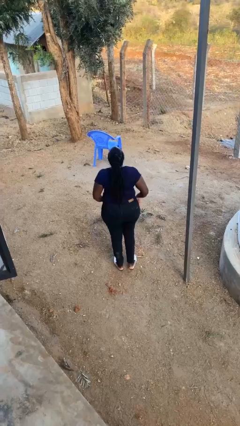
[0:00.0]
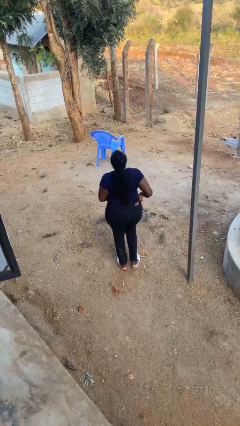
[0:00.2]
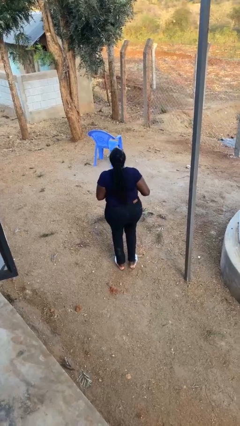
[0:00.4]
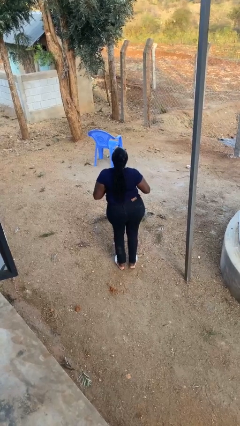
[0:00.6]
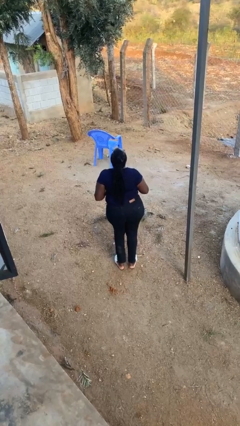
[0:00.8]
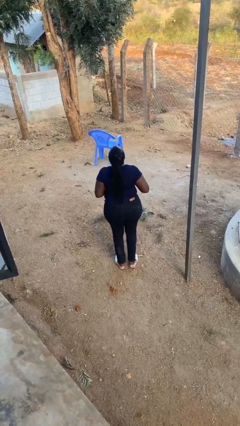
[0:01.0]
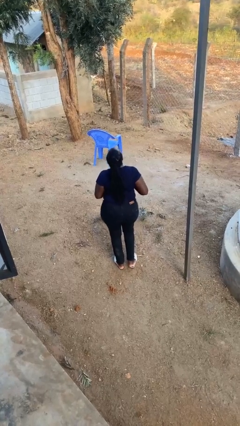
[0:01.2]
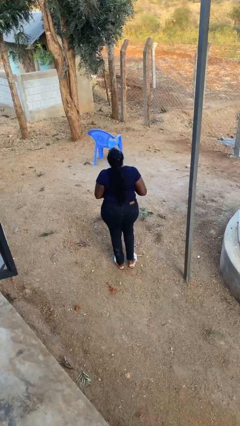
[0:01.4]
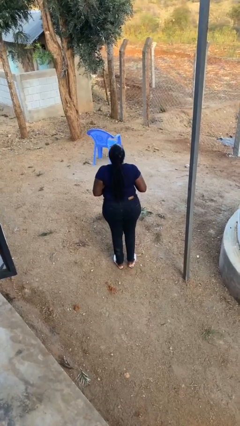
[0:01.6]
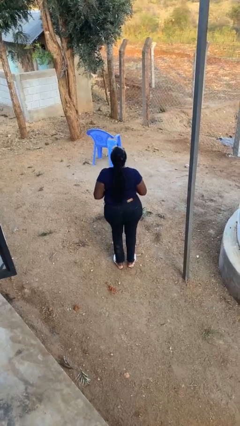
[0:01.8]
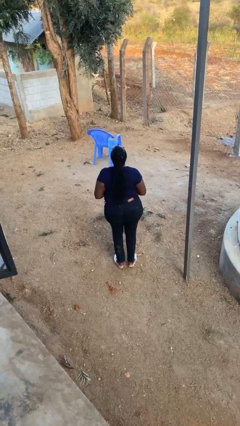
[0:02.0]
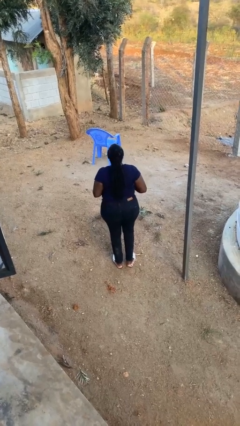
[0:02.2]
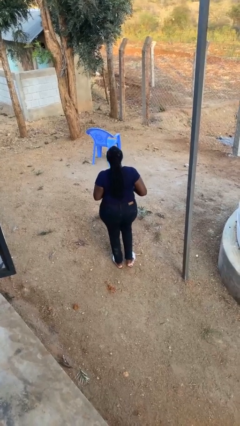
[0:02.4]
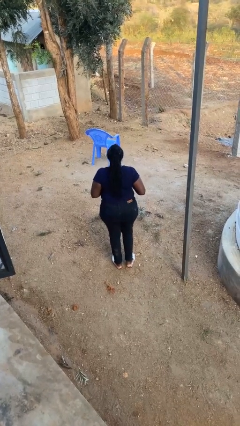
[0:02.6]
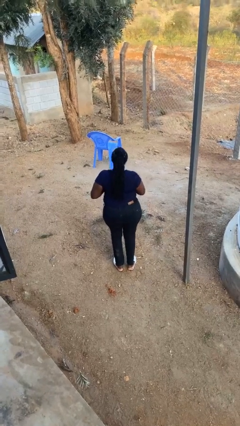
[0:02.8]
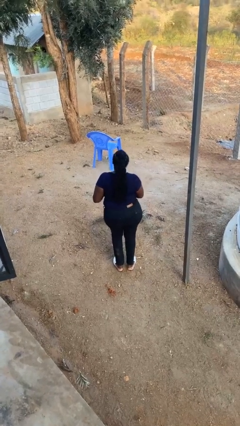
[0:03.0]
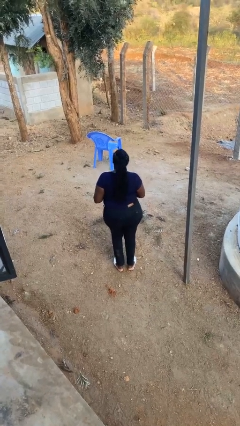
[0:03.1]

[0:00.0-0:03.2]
person wiggles hips

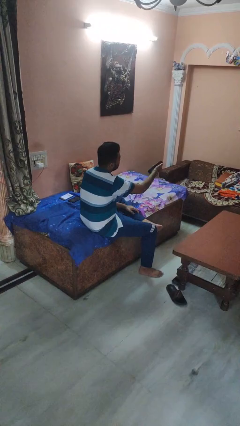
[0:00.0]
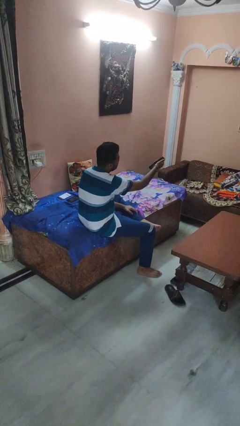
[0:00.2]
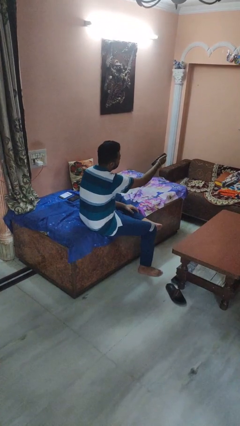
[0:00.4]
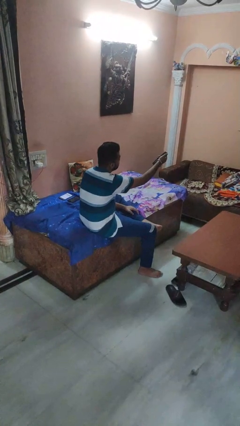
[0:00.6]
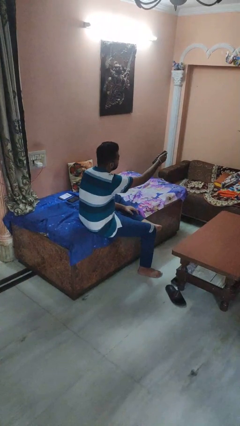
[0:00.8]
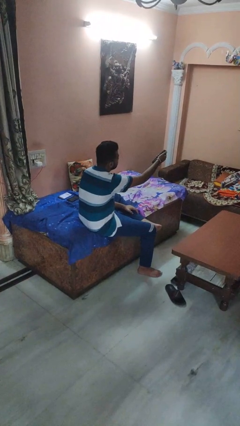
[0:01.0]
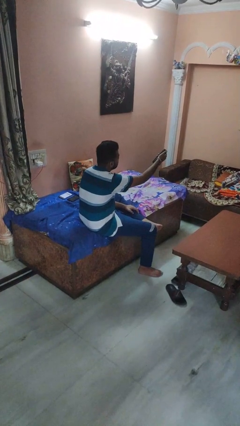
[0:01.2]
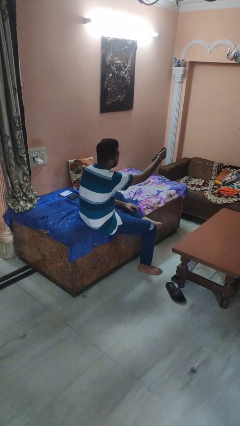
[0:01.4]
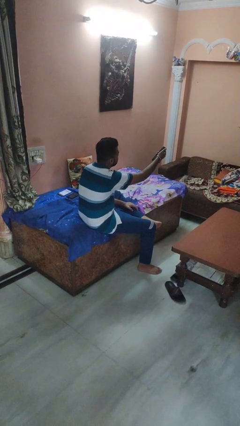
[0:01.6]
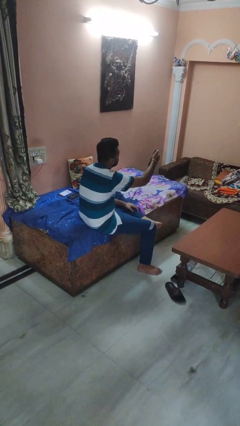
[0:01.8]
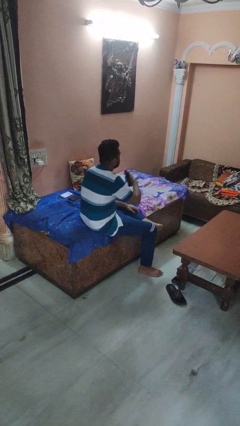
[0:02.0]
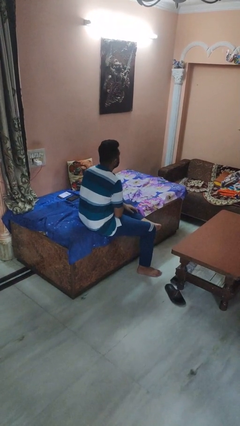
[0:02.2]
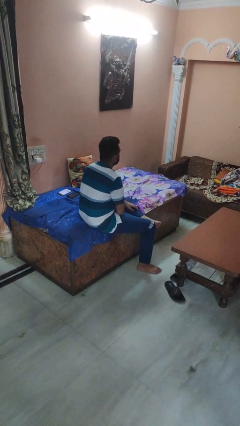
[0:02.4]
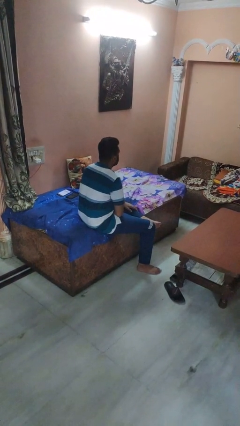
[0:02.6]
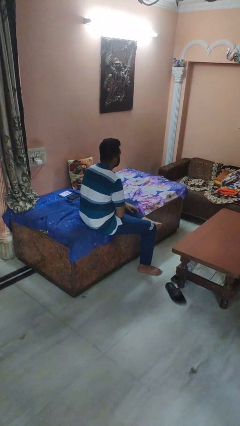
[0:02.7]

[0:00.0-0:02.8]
person uses television remote

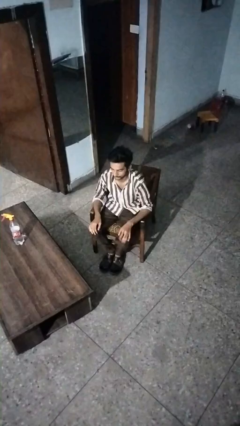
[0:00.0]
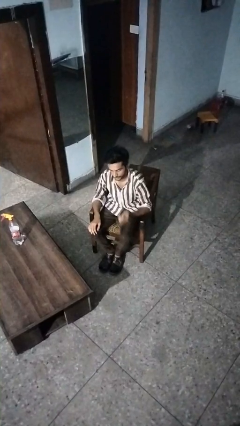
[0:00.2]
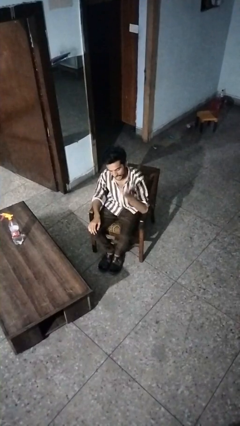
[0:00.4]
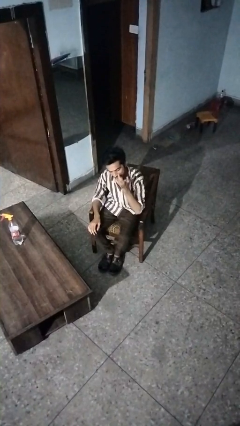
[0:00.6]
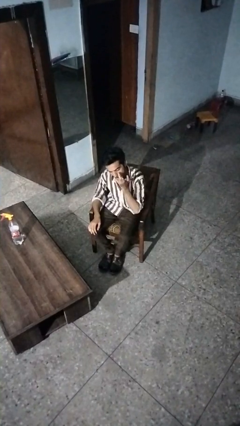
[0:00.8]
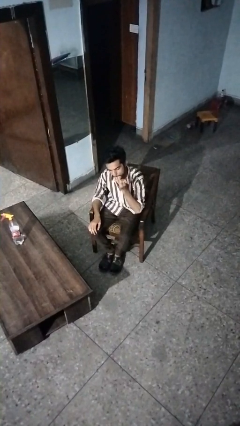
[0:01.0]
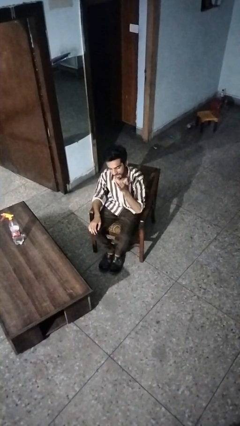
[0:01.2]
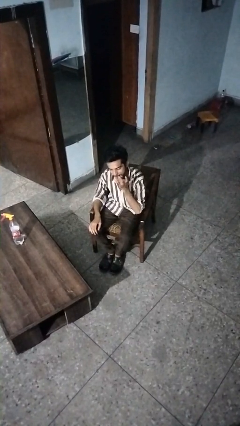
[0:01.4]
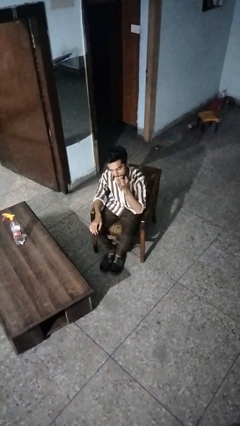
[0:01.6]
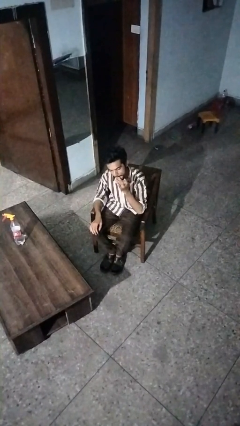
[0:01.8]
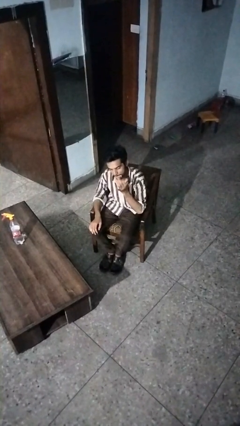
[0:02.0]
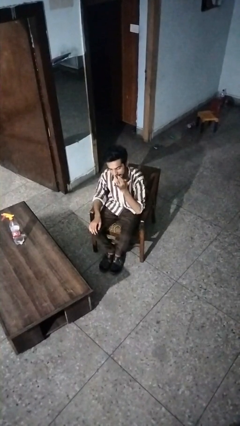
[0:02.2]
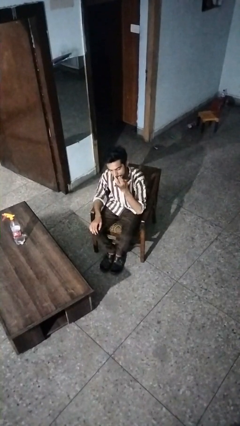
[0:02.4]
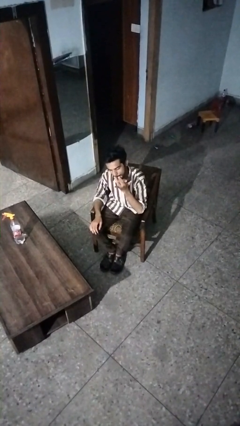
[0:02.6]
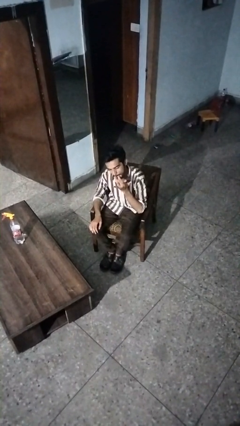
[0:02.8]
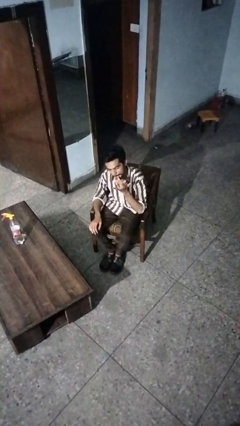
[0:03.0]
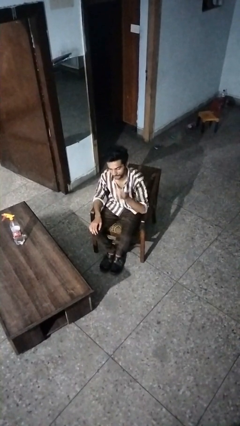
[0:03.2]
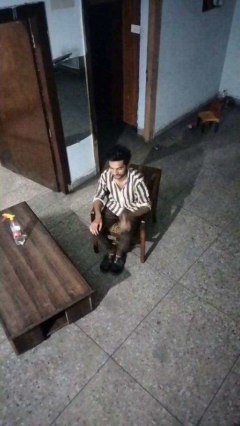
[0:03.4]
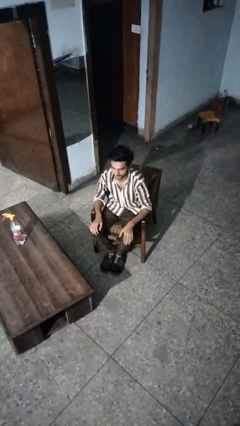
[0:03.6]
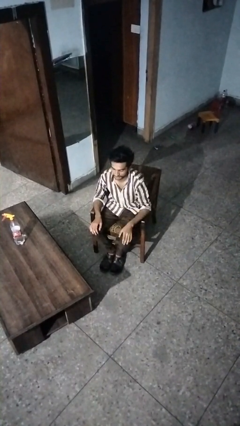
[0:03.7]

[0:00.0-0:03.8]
person licks fingers

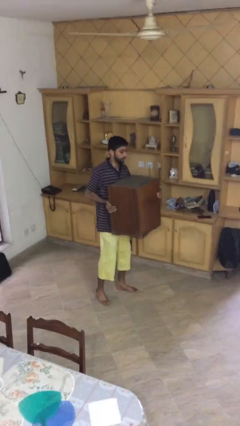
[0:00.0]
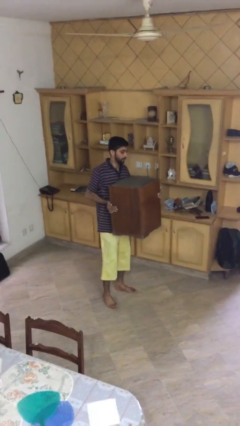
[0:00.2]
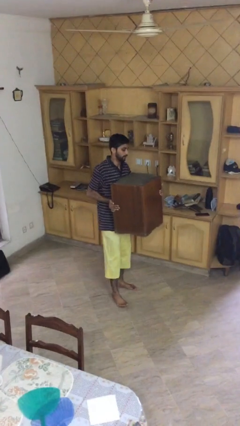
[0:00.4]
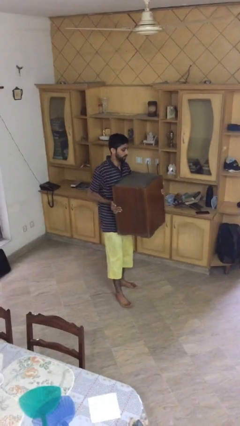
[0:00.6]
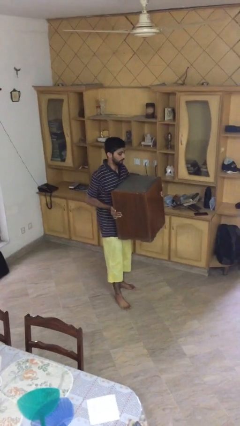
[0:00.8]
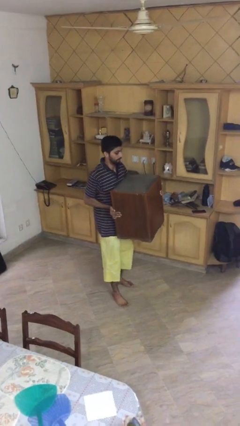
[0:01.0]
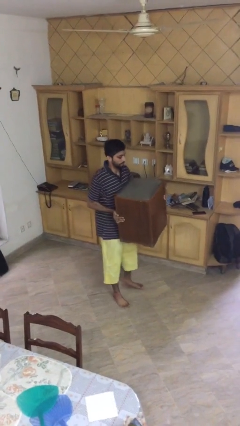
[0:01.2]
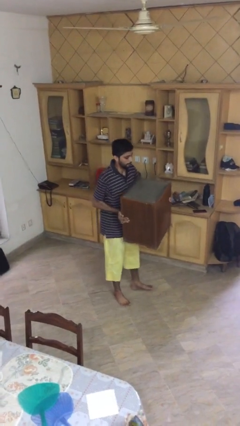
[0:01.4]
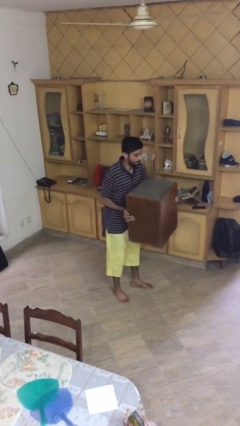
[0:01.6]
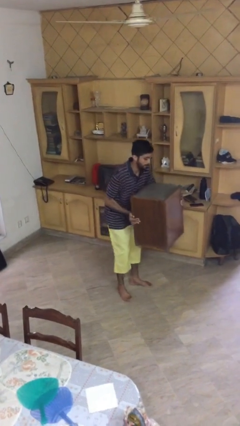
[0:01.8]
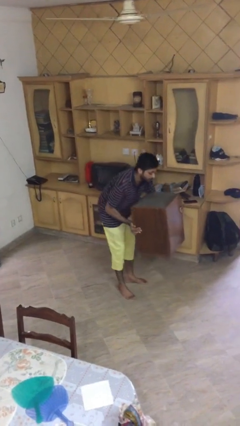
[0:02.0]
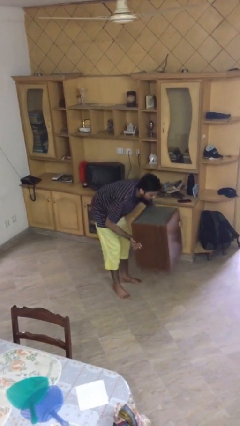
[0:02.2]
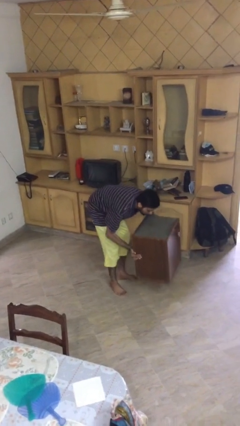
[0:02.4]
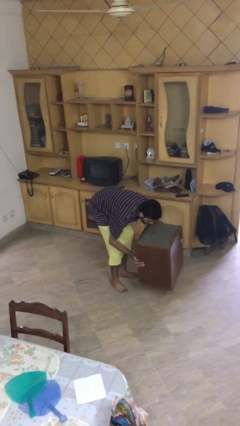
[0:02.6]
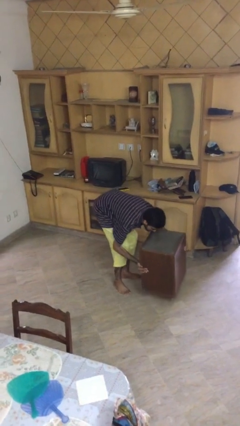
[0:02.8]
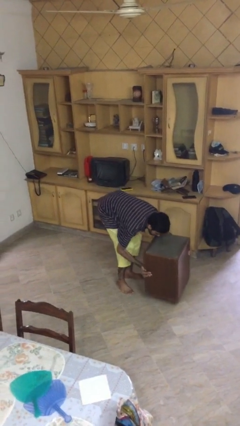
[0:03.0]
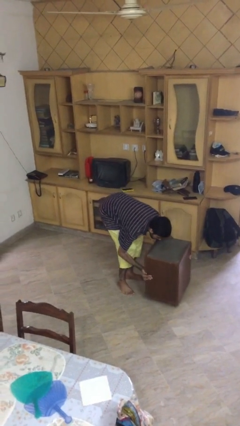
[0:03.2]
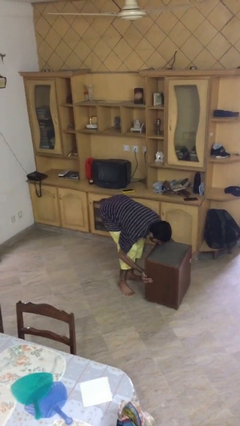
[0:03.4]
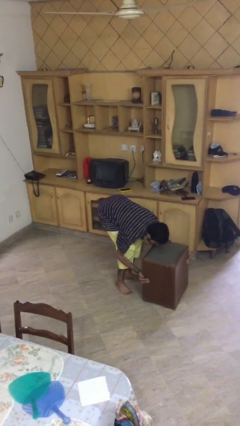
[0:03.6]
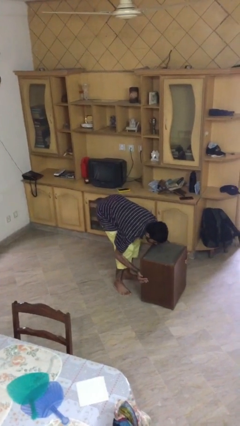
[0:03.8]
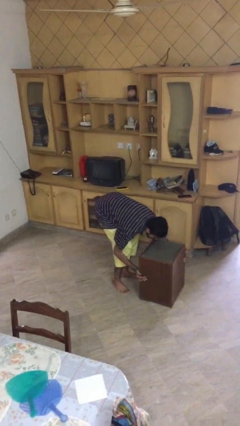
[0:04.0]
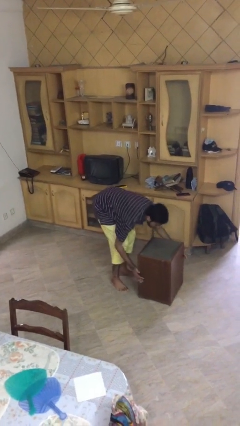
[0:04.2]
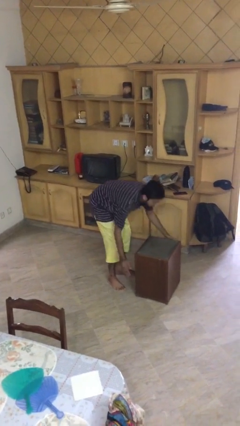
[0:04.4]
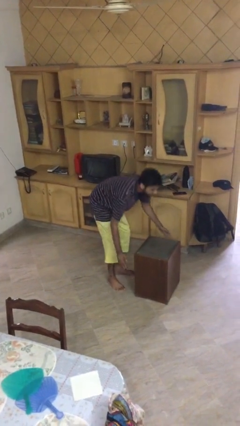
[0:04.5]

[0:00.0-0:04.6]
person puts down object on floor

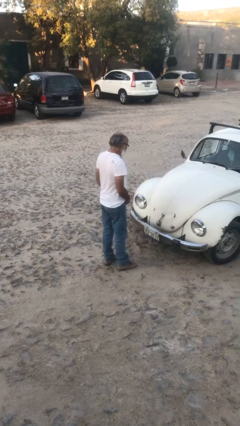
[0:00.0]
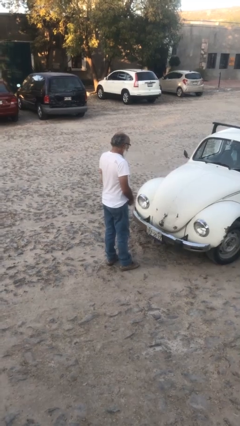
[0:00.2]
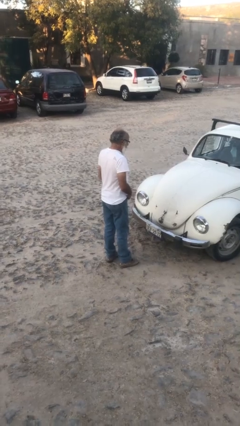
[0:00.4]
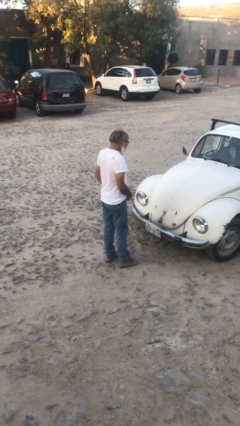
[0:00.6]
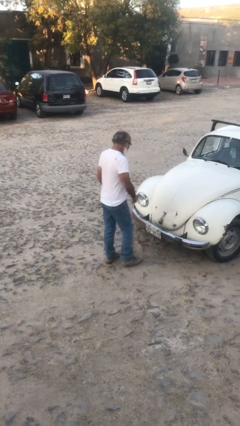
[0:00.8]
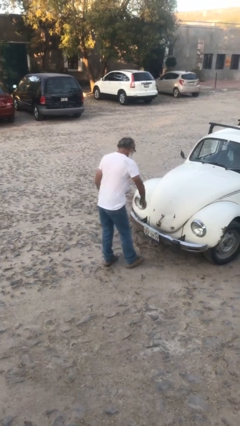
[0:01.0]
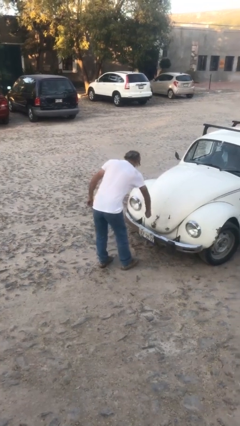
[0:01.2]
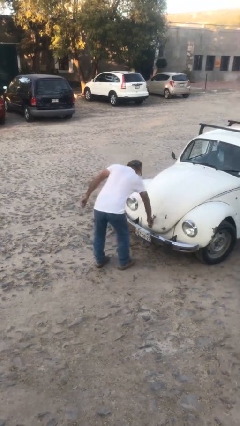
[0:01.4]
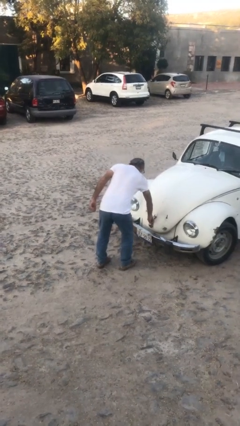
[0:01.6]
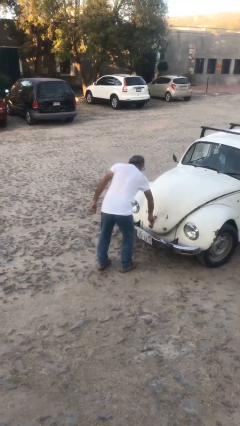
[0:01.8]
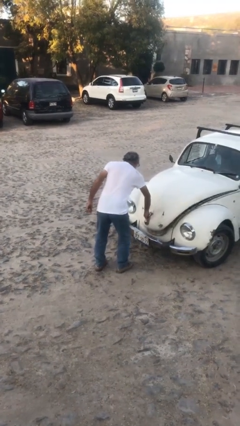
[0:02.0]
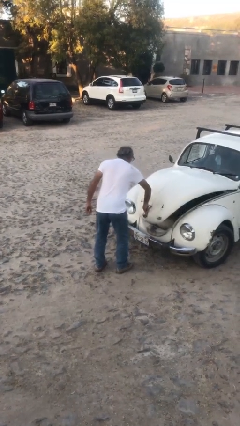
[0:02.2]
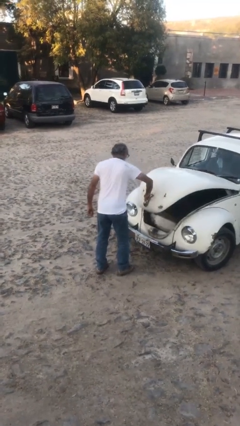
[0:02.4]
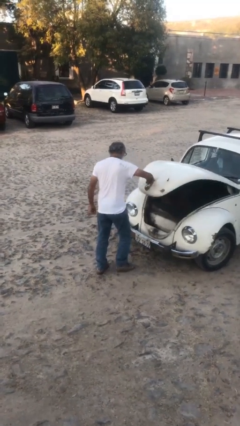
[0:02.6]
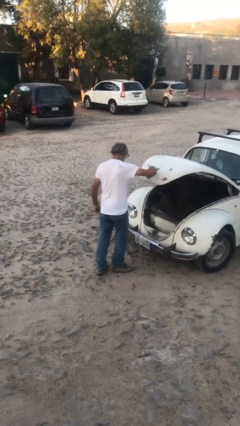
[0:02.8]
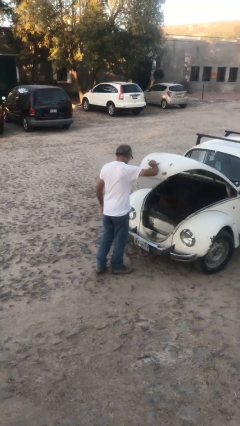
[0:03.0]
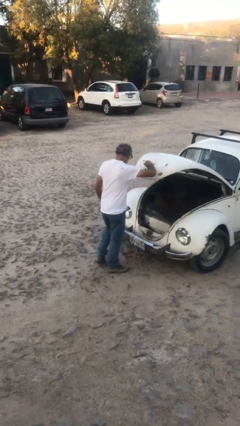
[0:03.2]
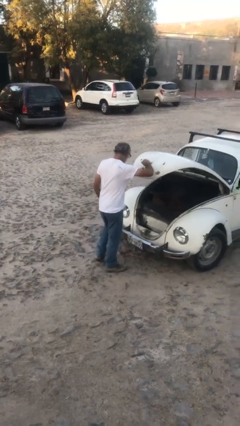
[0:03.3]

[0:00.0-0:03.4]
person opens car trunk
